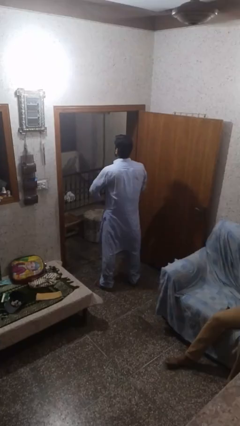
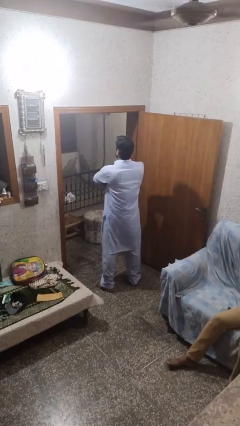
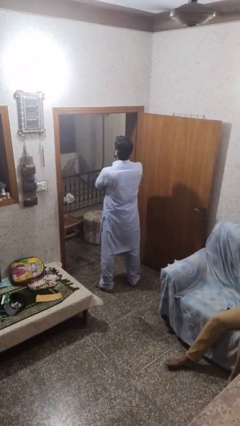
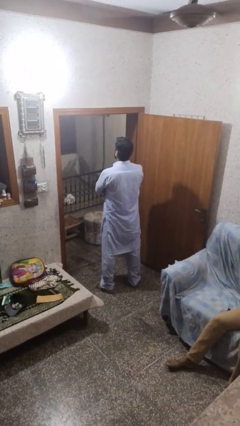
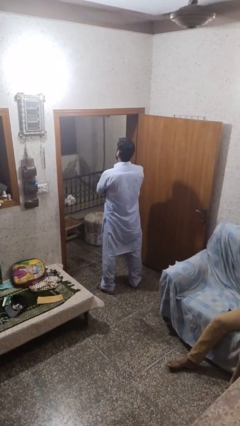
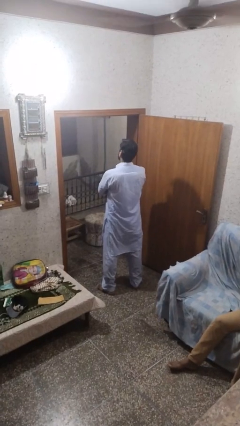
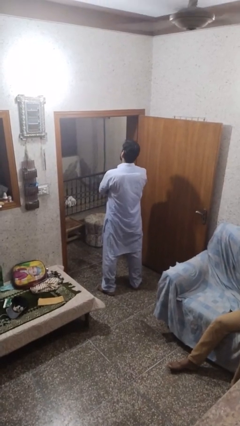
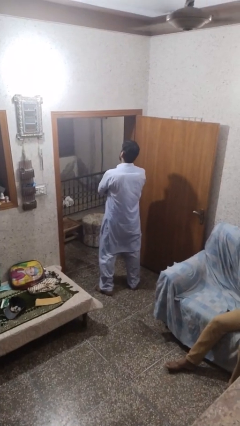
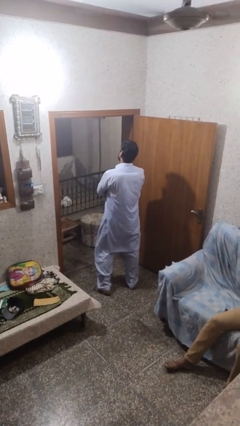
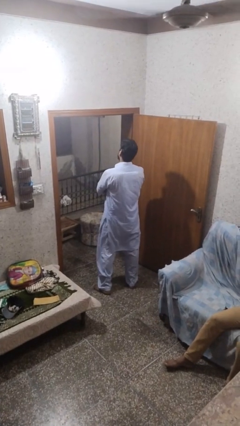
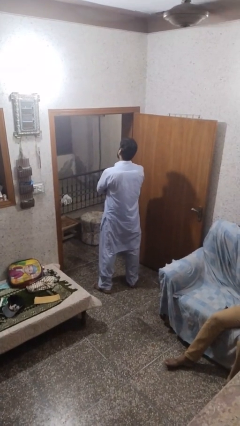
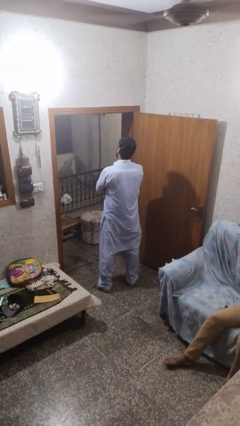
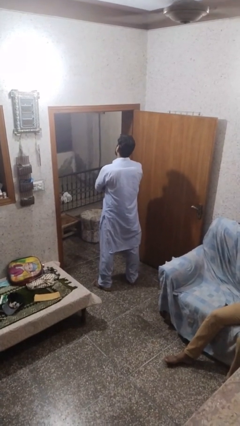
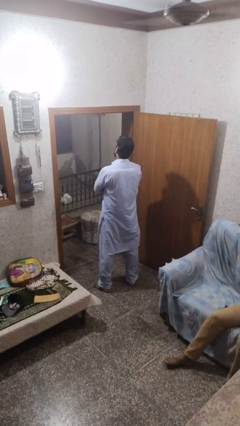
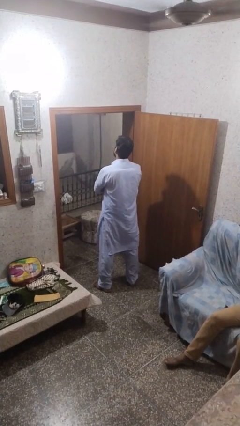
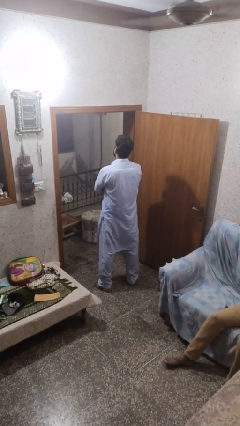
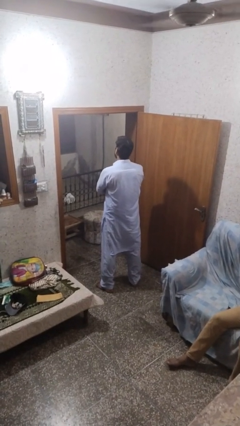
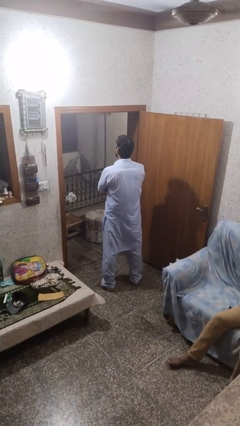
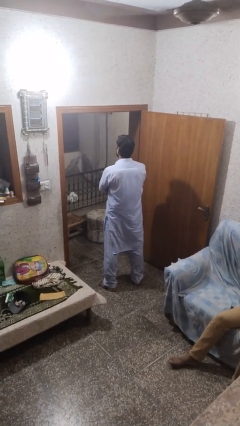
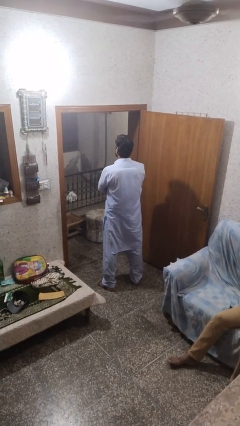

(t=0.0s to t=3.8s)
person crosses arms

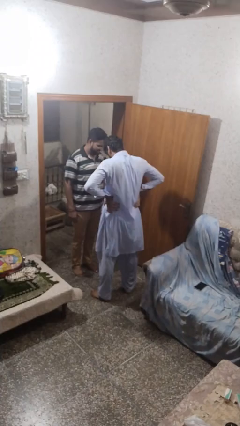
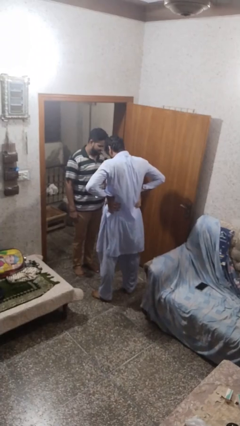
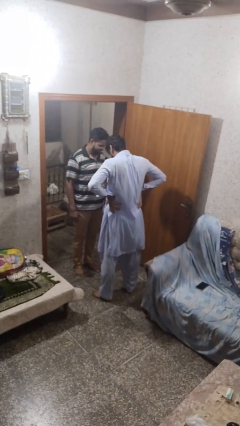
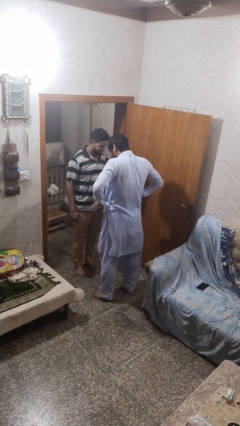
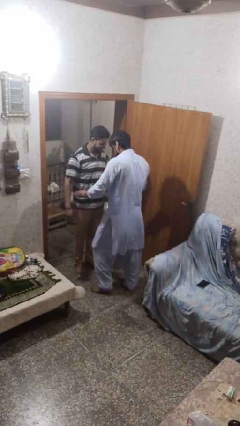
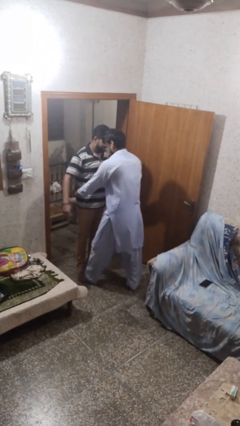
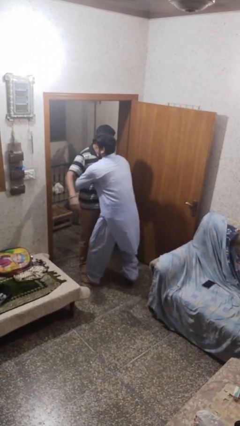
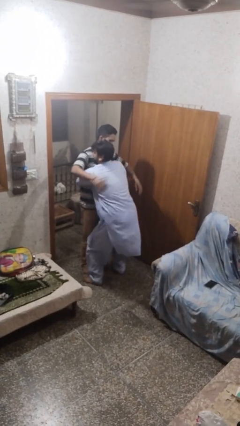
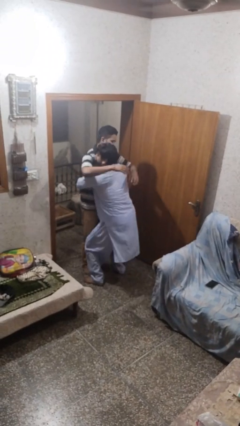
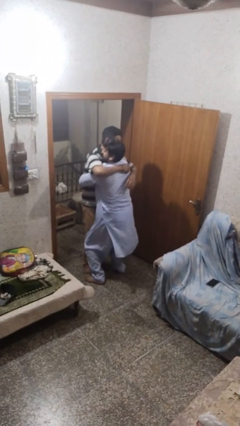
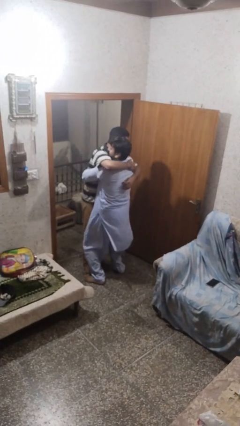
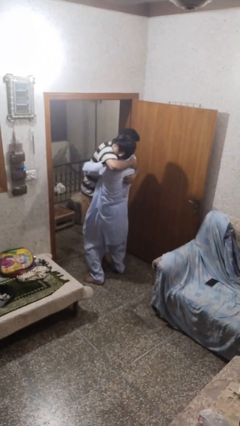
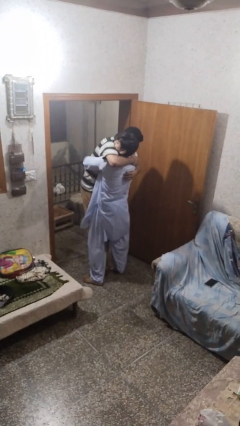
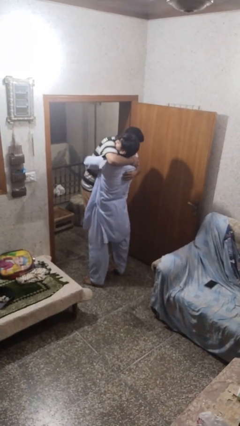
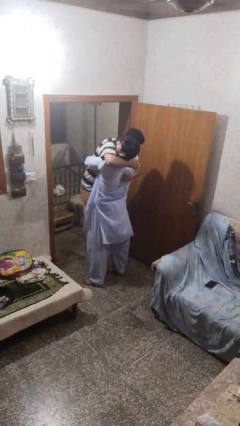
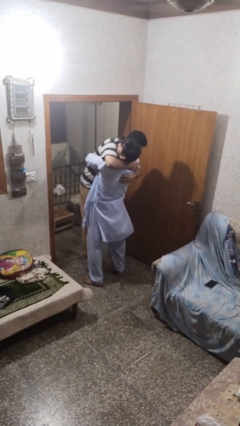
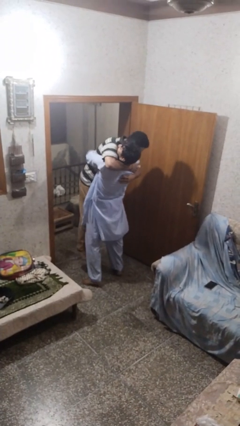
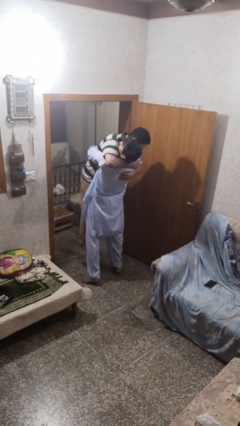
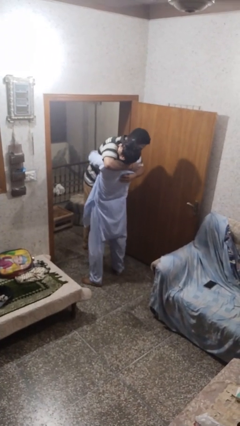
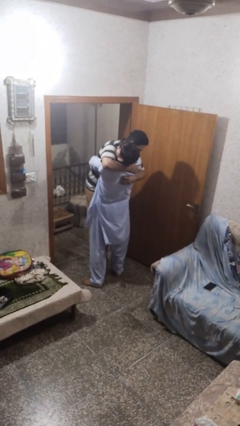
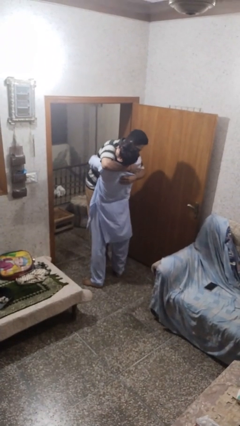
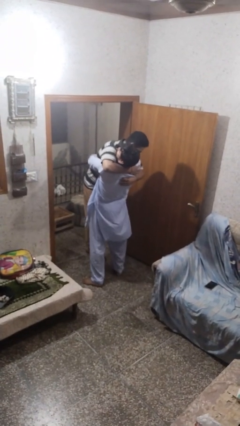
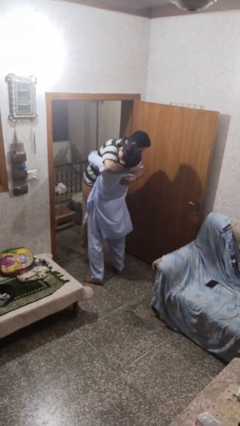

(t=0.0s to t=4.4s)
person picks up person

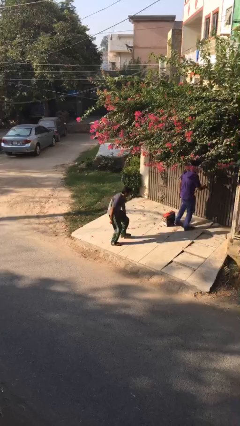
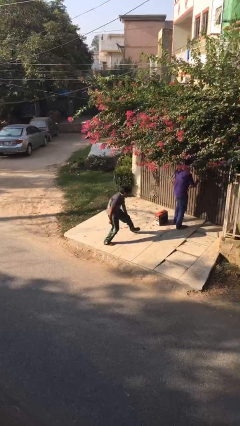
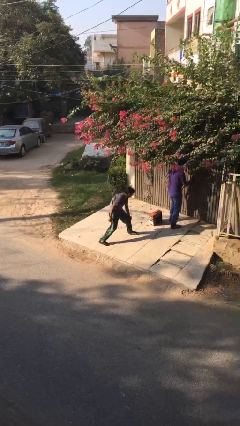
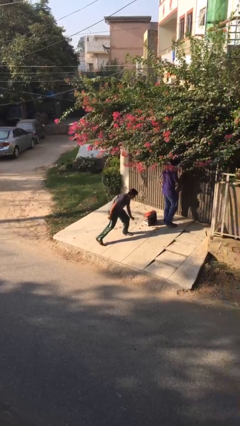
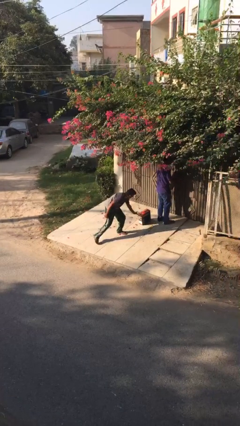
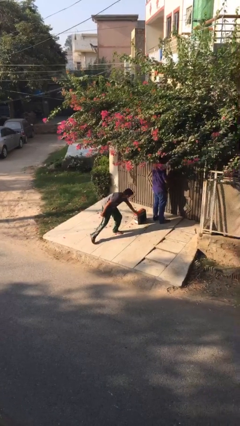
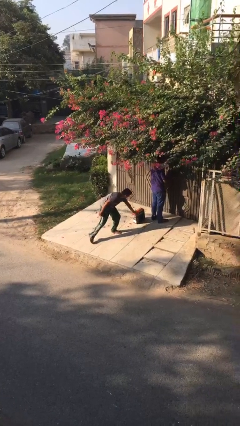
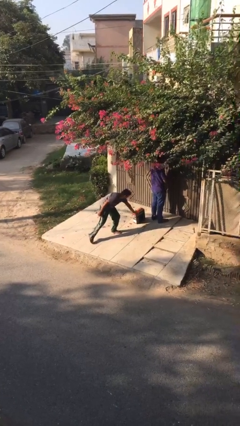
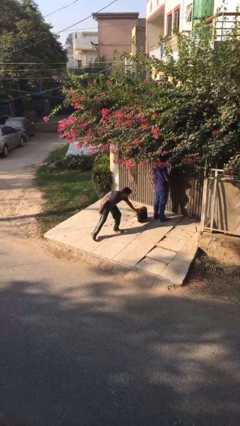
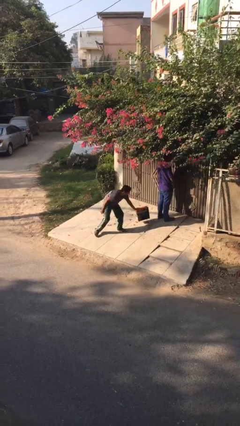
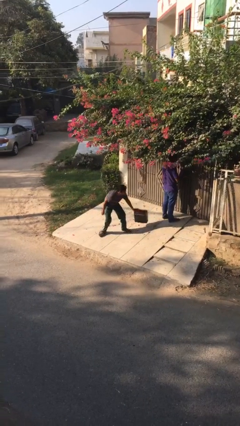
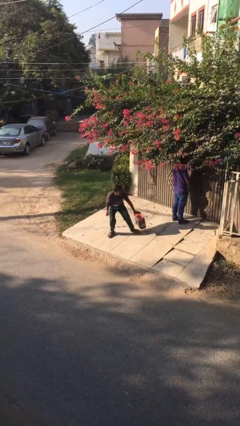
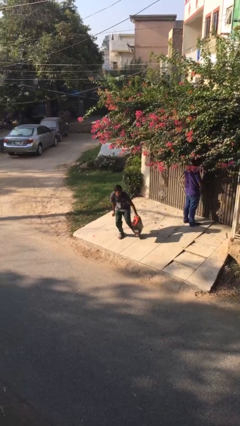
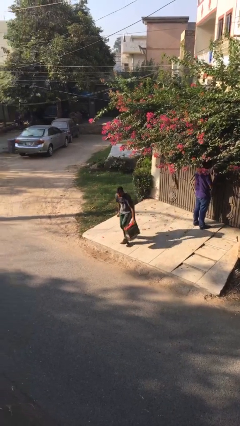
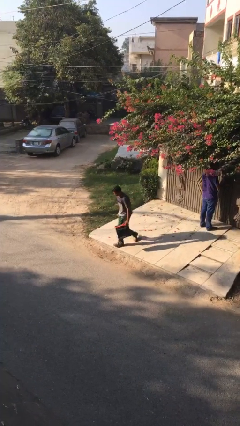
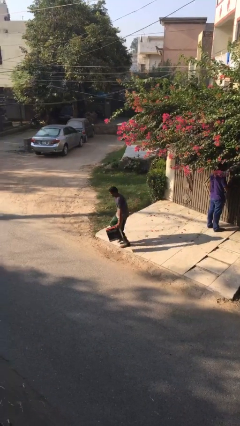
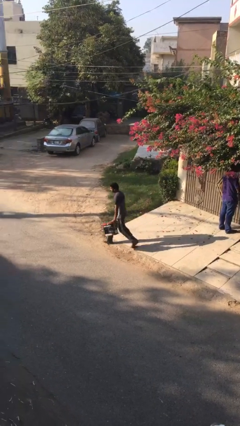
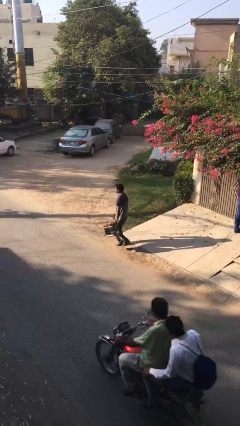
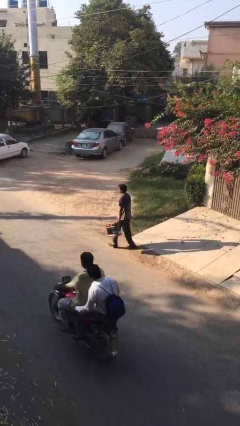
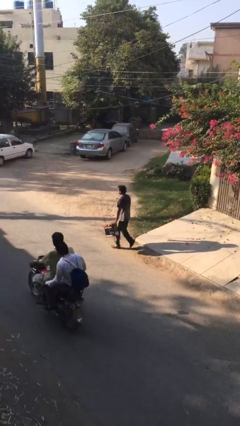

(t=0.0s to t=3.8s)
person steals object from person

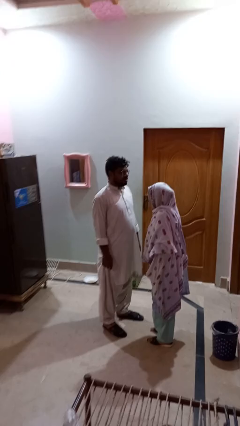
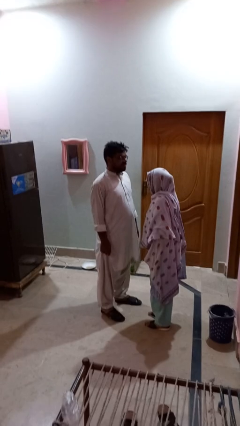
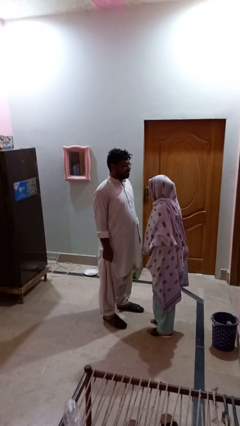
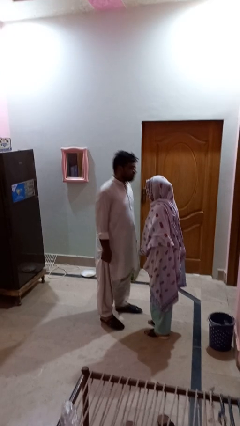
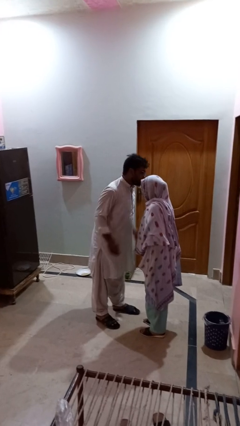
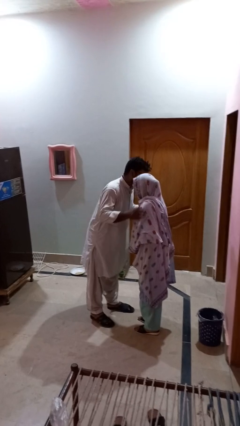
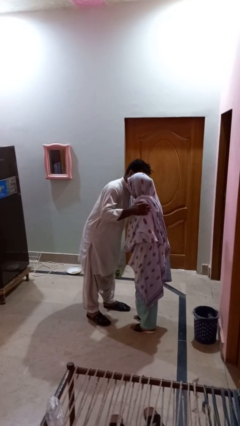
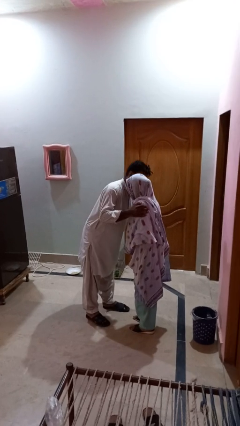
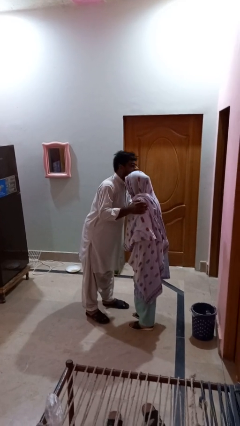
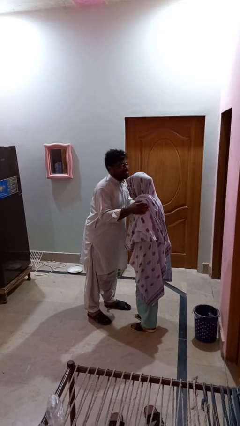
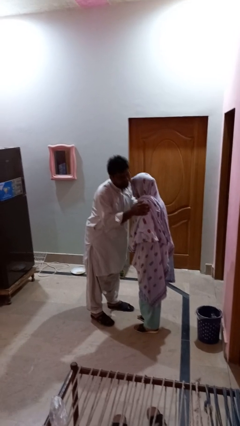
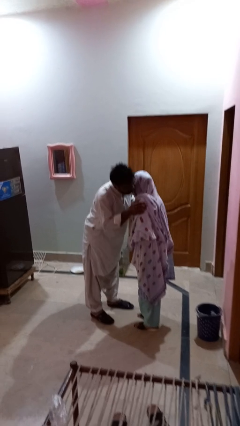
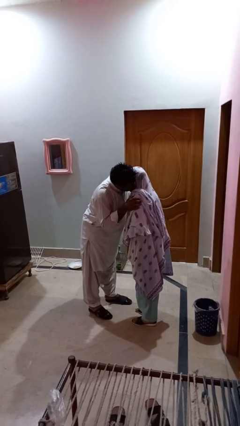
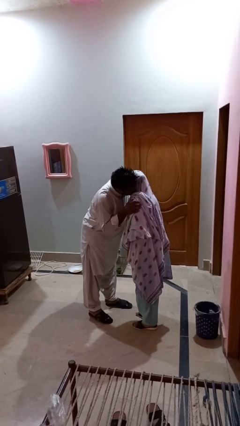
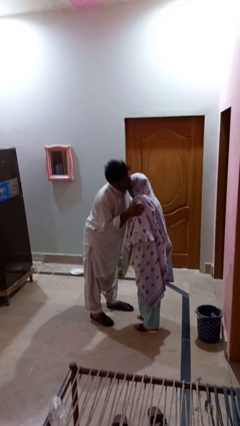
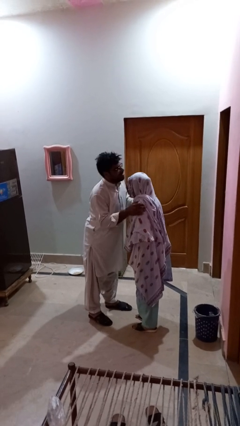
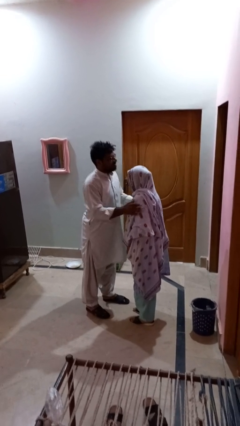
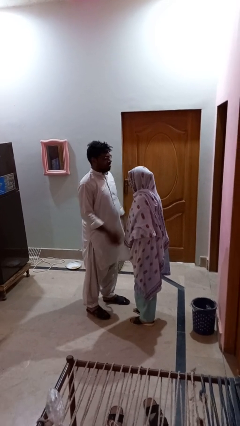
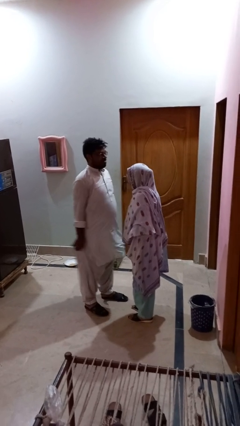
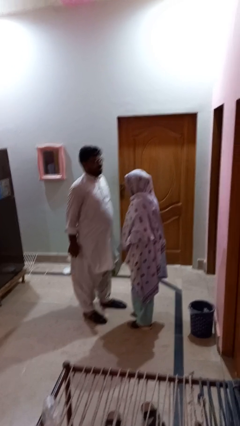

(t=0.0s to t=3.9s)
person kisses cheek of person

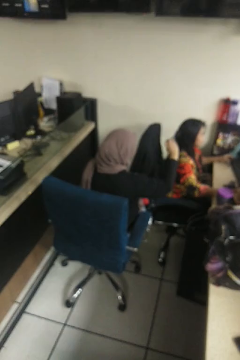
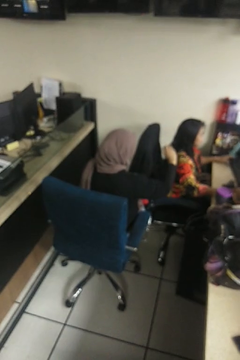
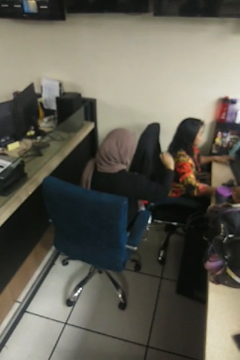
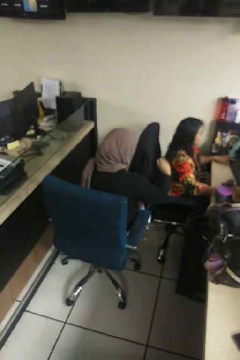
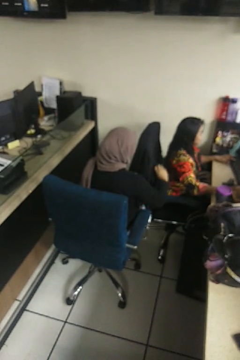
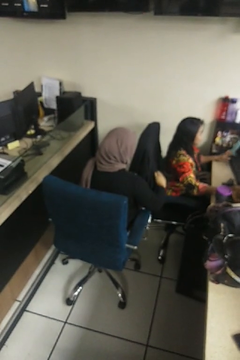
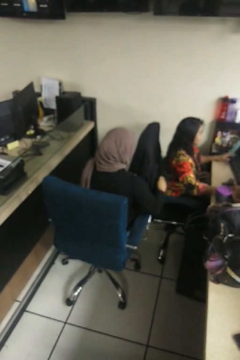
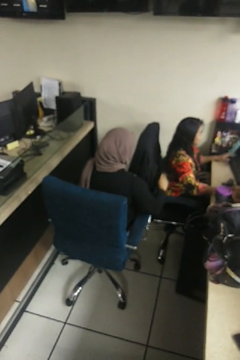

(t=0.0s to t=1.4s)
person brushes hair of person

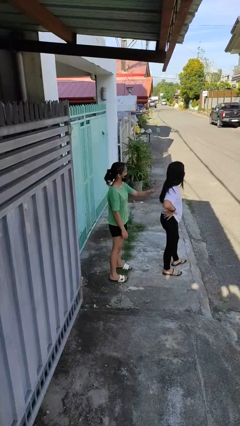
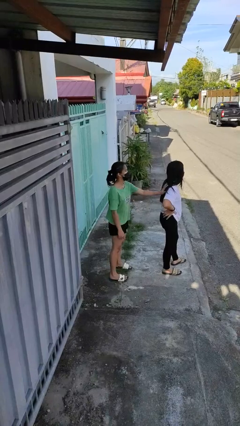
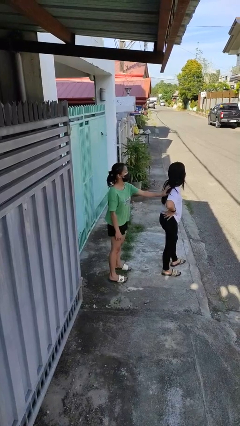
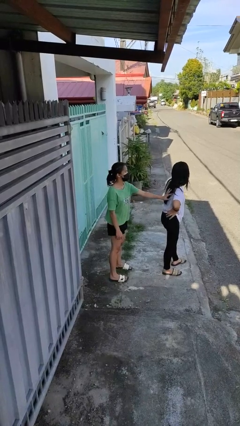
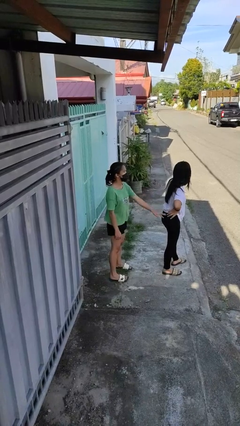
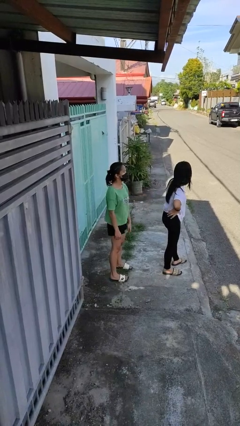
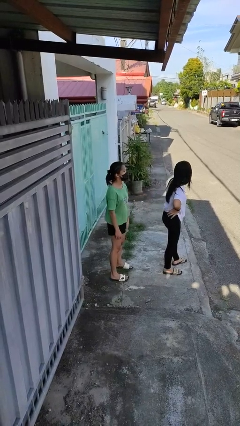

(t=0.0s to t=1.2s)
person touches back of person
